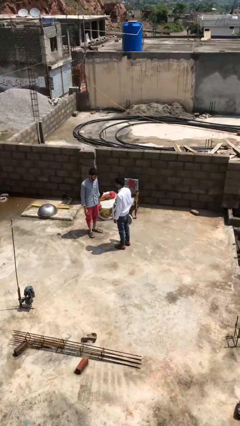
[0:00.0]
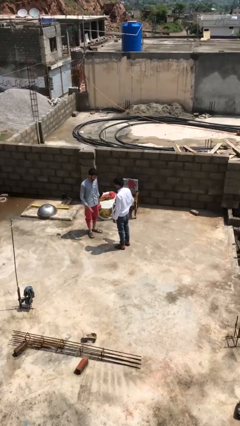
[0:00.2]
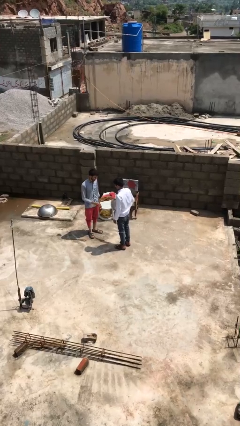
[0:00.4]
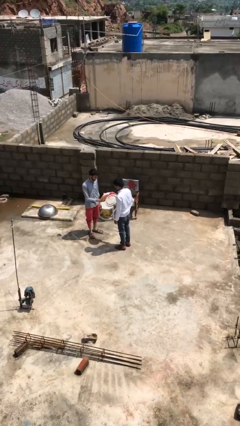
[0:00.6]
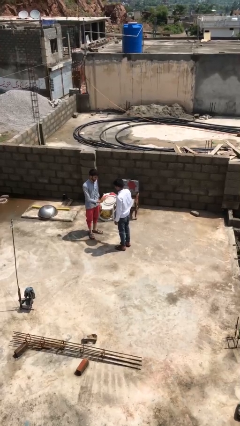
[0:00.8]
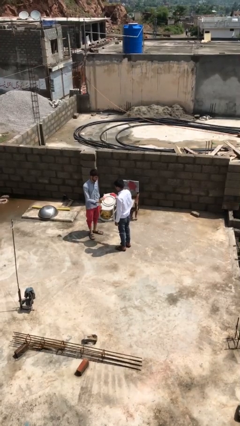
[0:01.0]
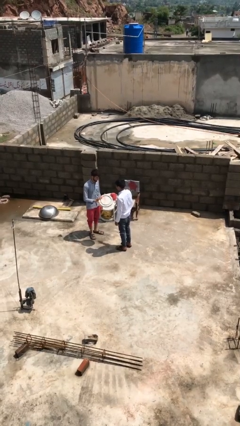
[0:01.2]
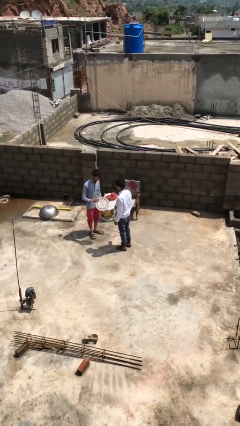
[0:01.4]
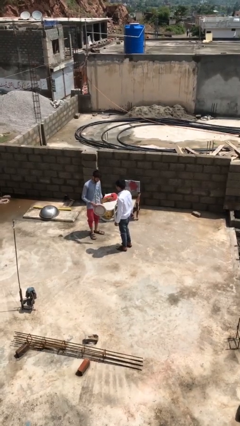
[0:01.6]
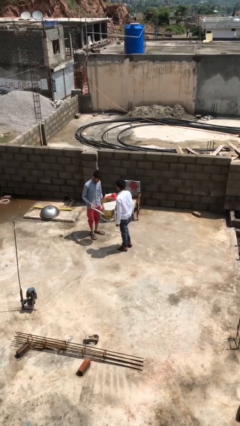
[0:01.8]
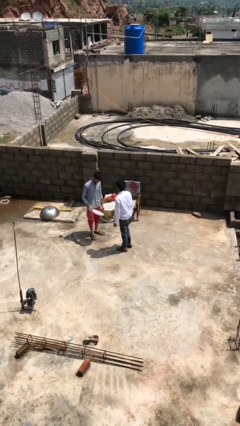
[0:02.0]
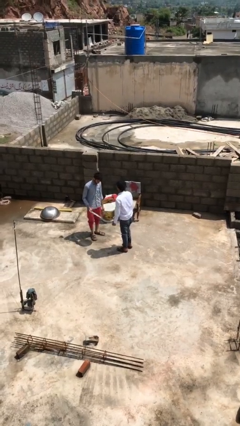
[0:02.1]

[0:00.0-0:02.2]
person transfers object to person

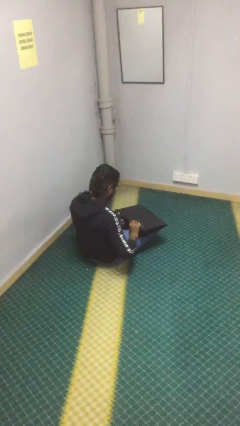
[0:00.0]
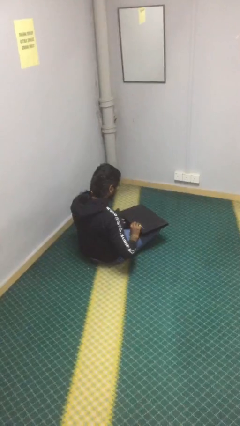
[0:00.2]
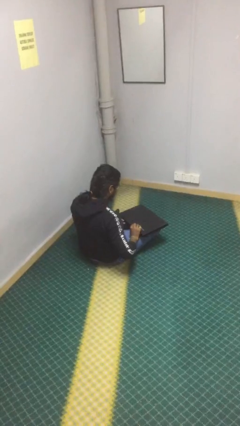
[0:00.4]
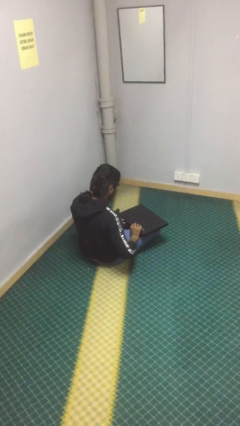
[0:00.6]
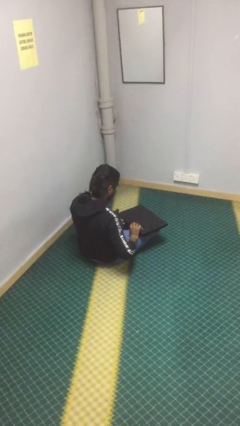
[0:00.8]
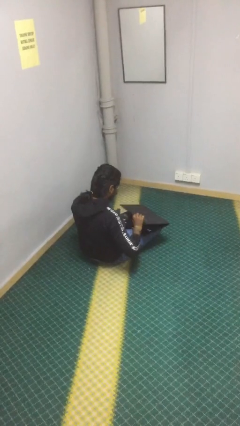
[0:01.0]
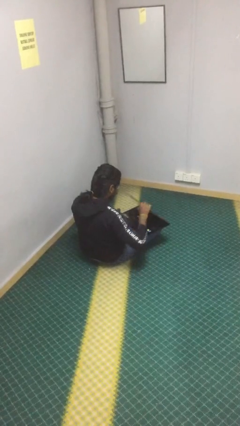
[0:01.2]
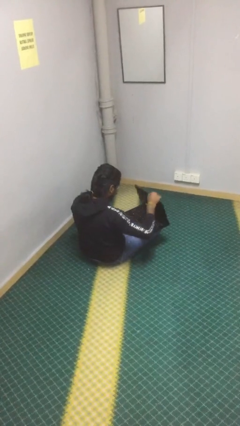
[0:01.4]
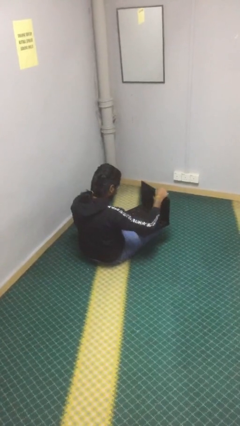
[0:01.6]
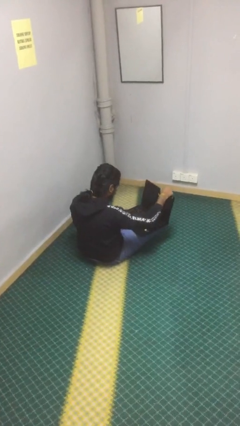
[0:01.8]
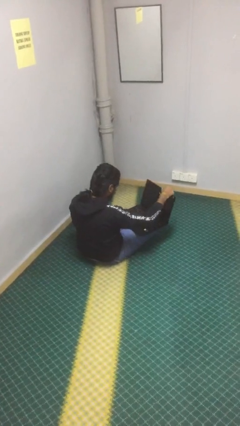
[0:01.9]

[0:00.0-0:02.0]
person opens laptop

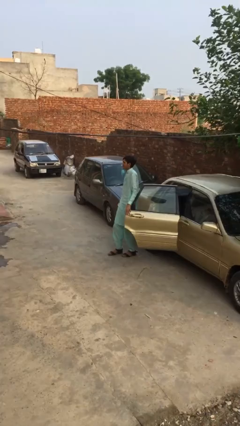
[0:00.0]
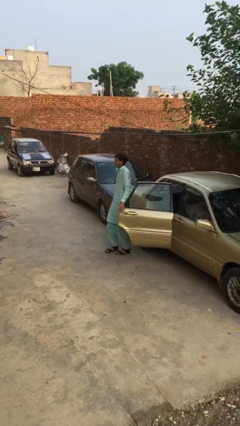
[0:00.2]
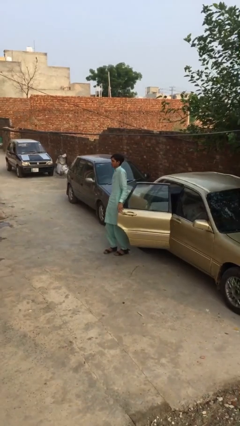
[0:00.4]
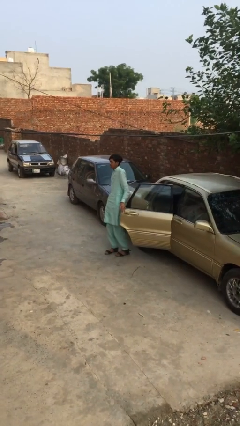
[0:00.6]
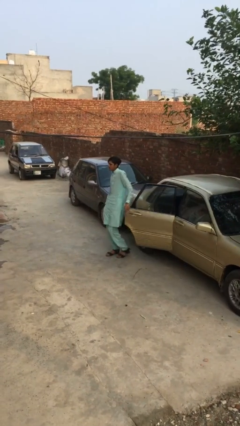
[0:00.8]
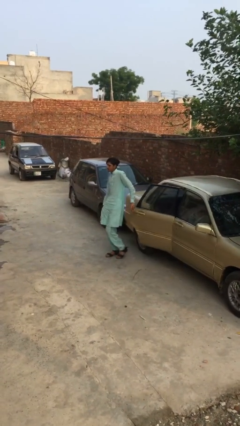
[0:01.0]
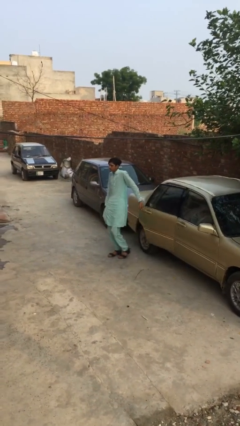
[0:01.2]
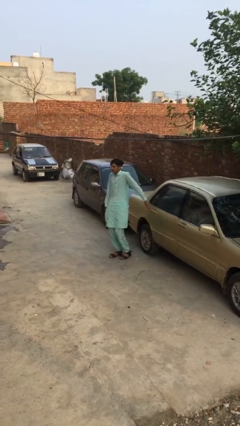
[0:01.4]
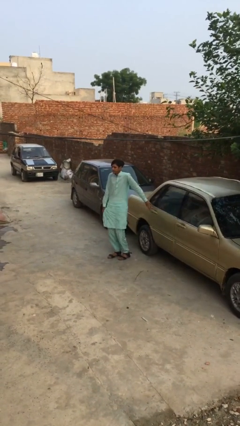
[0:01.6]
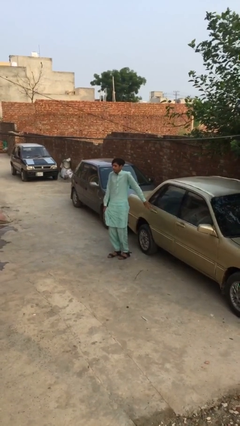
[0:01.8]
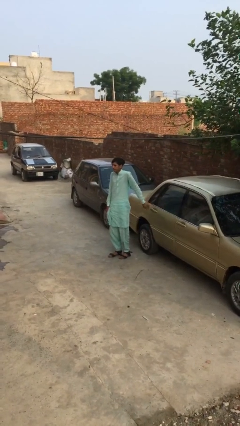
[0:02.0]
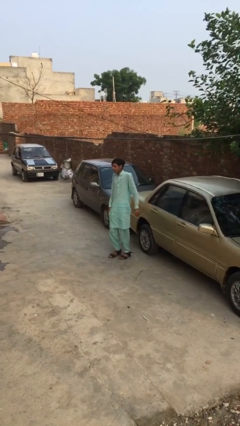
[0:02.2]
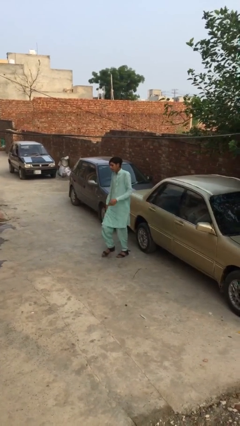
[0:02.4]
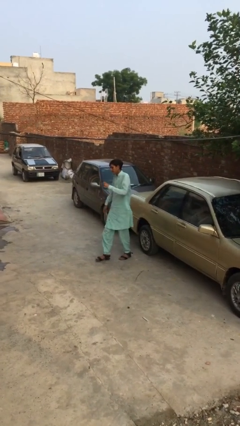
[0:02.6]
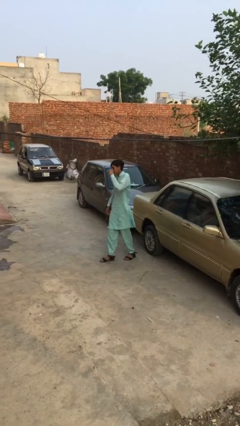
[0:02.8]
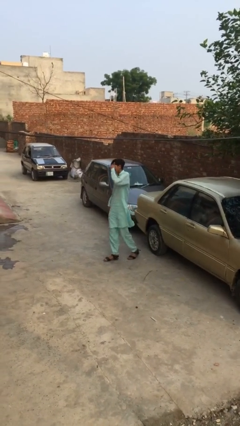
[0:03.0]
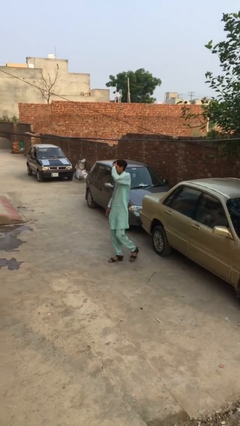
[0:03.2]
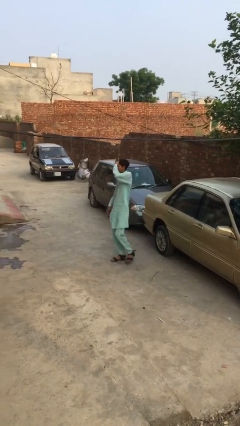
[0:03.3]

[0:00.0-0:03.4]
person closes car door

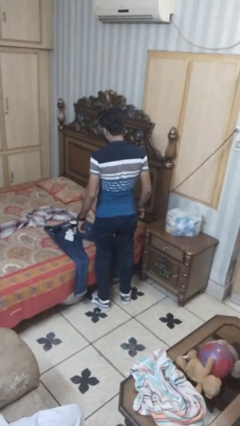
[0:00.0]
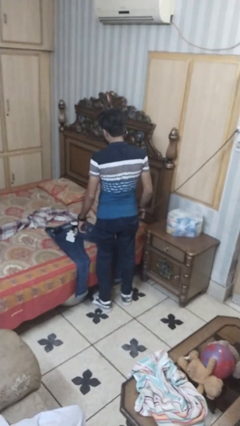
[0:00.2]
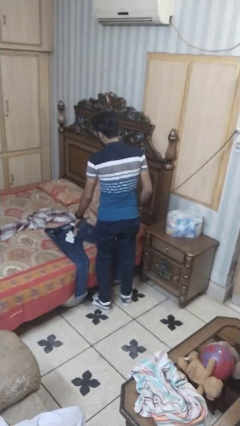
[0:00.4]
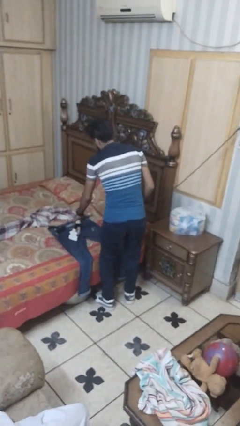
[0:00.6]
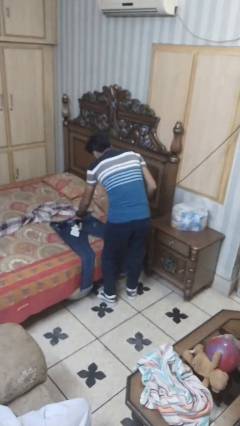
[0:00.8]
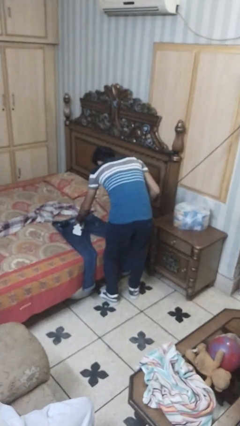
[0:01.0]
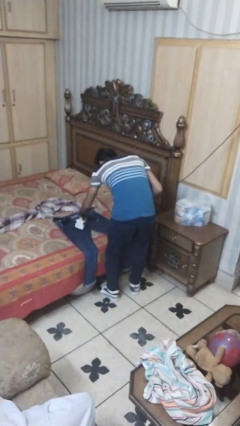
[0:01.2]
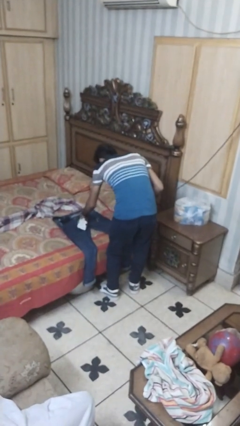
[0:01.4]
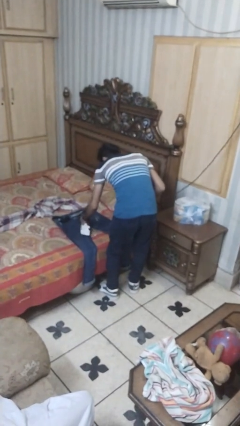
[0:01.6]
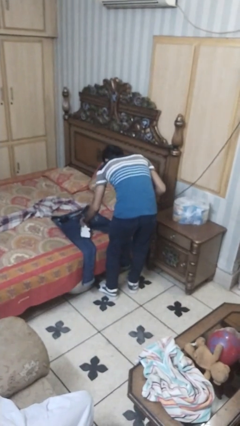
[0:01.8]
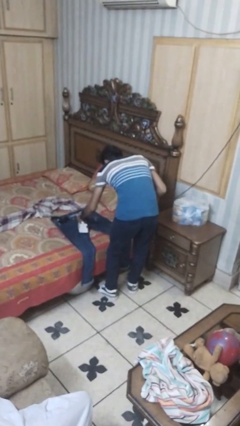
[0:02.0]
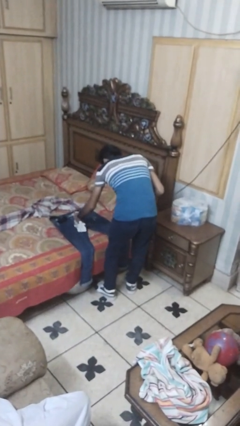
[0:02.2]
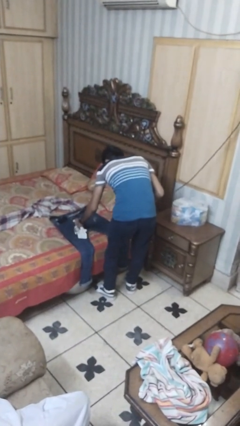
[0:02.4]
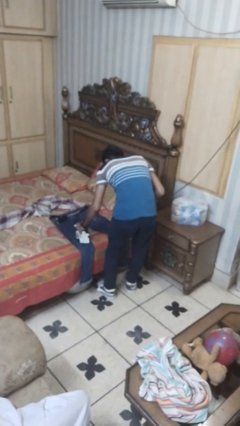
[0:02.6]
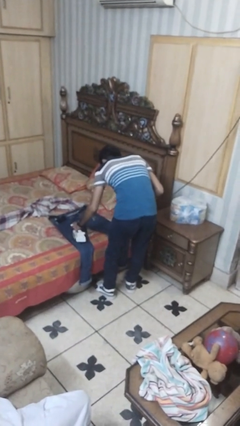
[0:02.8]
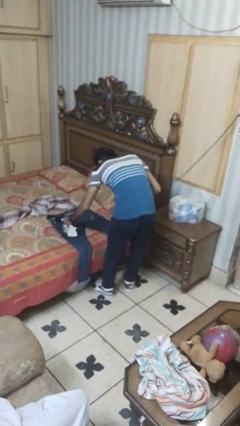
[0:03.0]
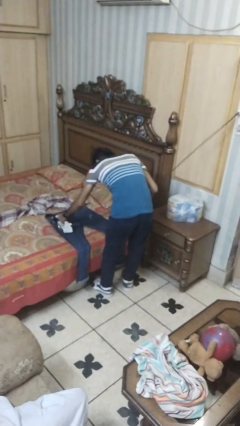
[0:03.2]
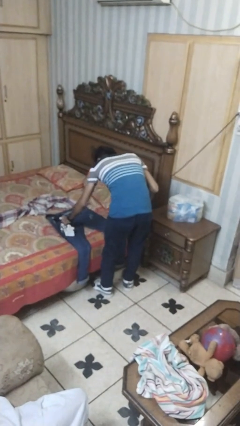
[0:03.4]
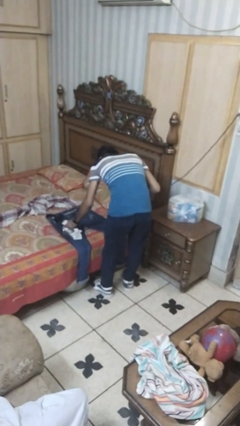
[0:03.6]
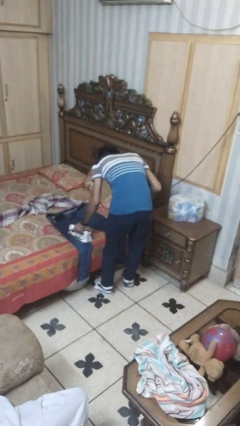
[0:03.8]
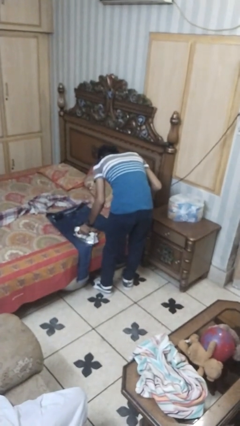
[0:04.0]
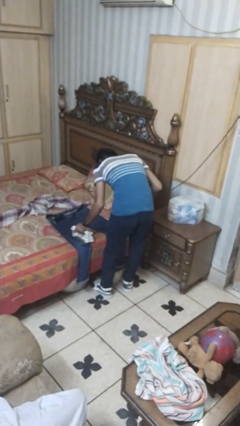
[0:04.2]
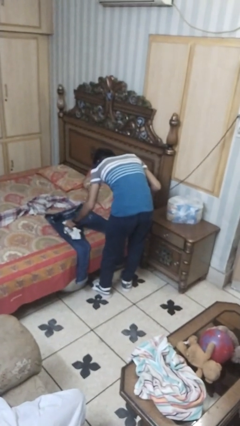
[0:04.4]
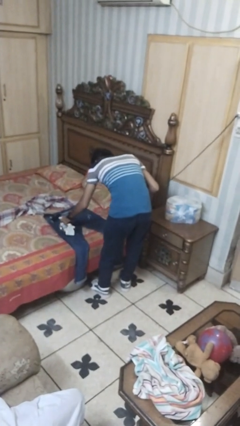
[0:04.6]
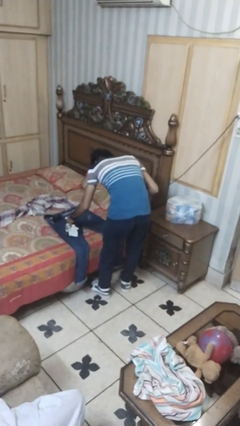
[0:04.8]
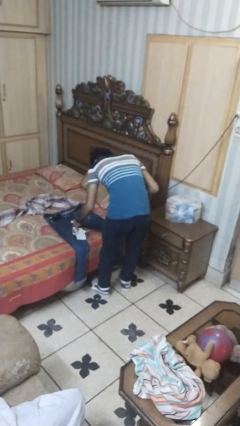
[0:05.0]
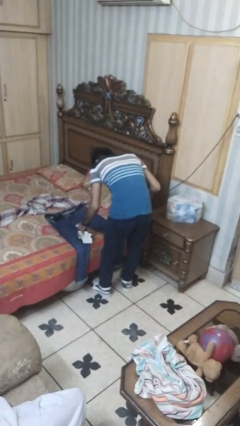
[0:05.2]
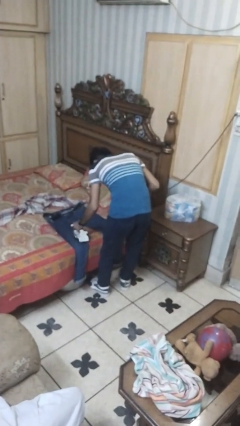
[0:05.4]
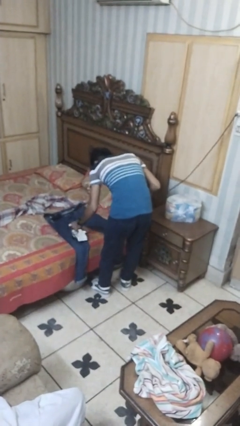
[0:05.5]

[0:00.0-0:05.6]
person irons clothes

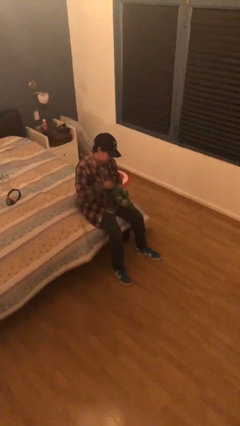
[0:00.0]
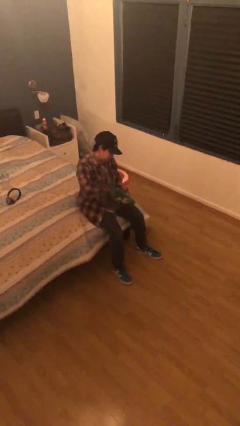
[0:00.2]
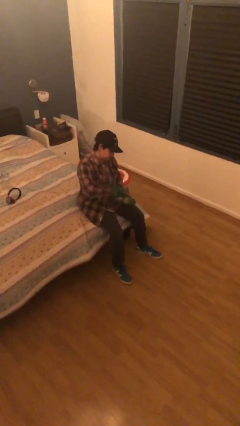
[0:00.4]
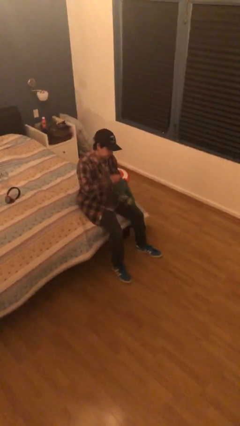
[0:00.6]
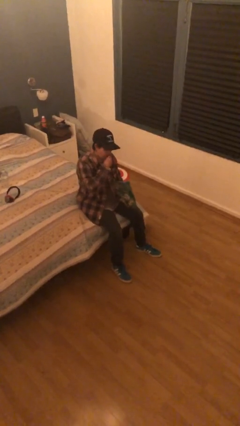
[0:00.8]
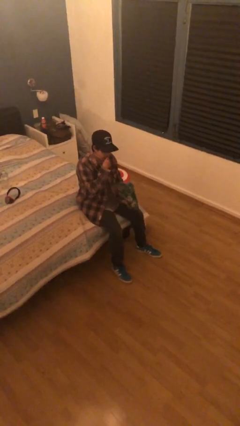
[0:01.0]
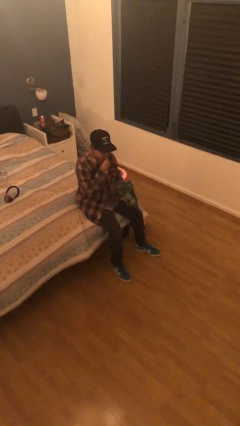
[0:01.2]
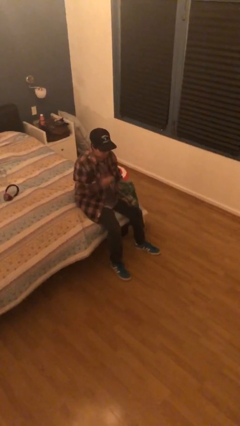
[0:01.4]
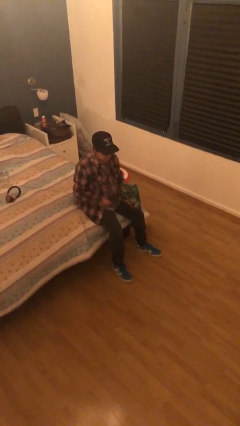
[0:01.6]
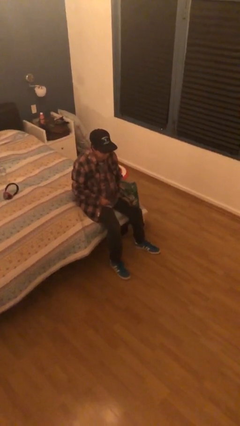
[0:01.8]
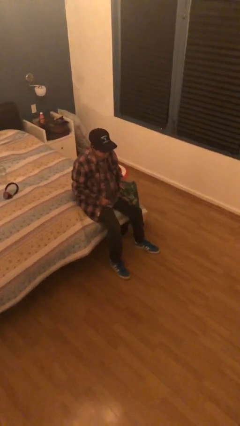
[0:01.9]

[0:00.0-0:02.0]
person eats snack from bag

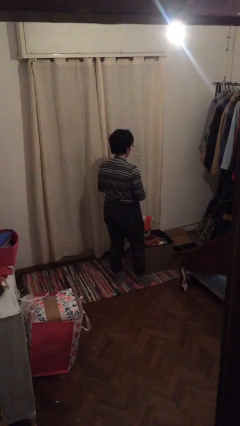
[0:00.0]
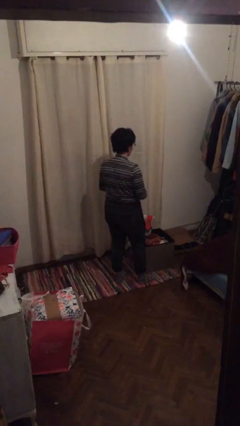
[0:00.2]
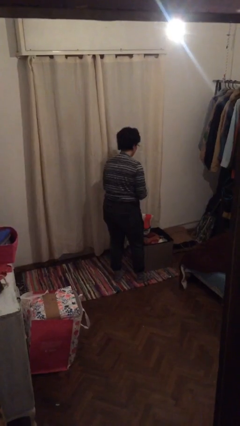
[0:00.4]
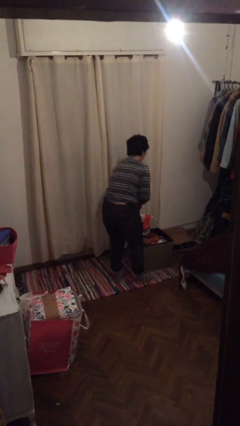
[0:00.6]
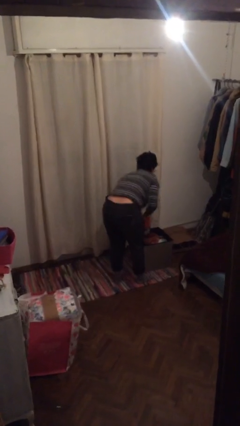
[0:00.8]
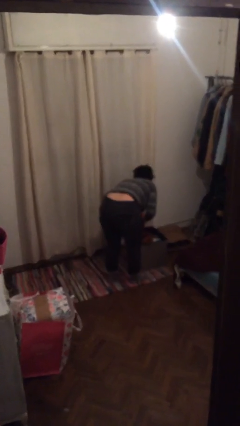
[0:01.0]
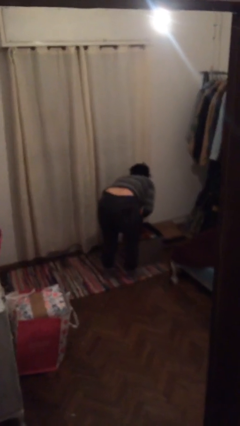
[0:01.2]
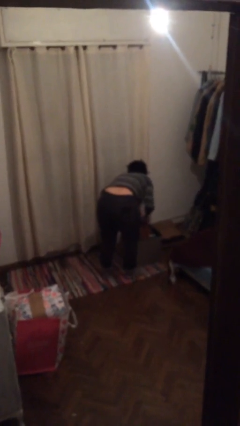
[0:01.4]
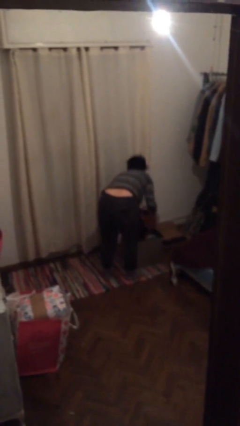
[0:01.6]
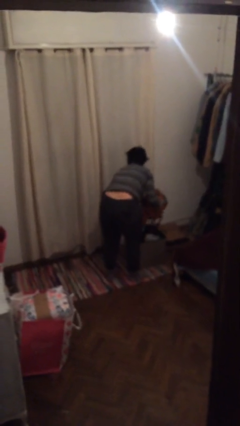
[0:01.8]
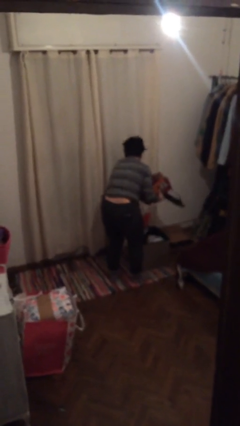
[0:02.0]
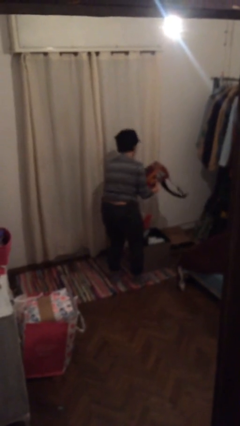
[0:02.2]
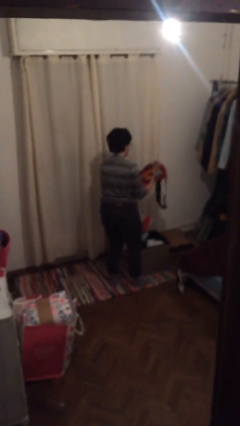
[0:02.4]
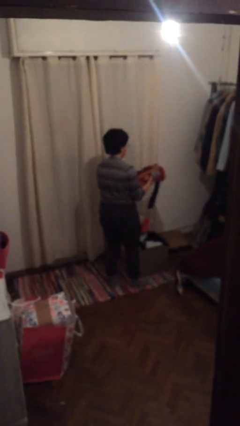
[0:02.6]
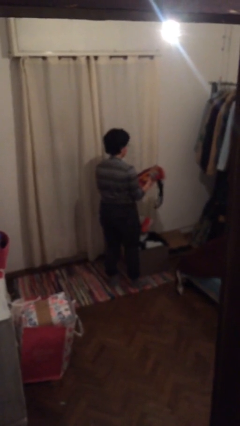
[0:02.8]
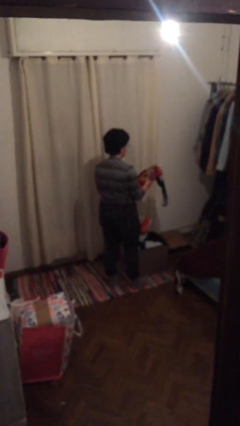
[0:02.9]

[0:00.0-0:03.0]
person takes object from basket
